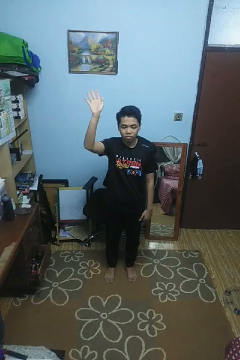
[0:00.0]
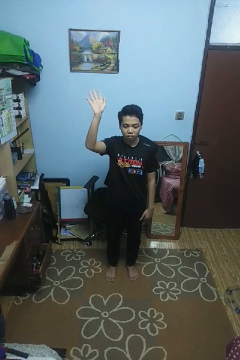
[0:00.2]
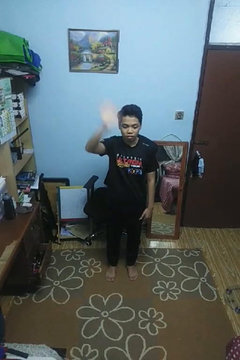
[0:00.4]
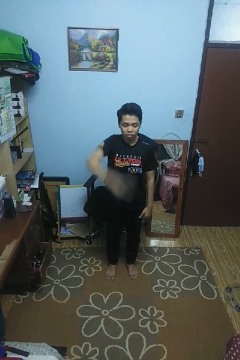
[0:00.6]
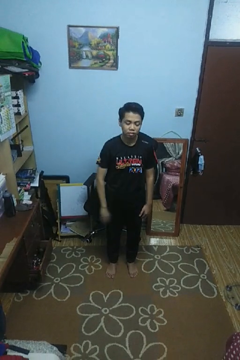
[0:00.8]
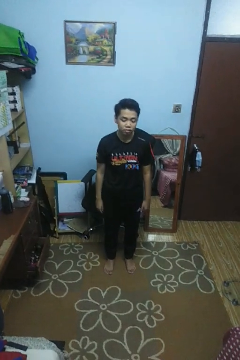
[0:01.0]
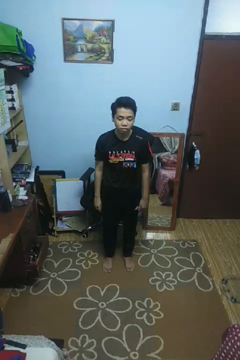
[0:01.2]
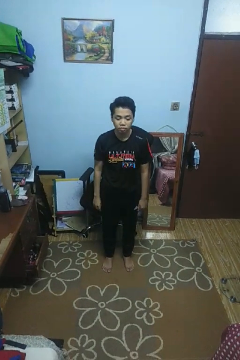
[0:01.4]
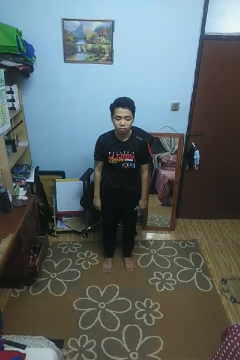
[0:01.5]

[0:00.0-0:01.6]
person gestures swipe down

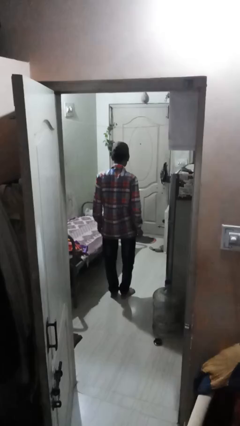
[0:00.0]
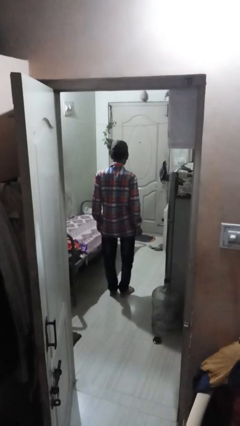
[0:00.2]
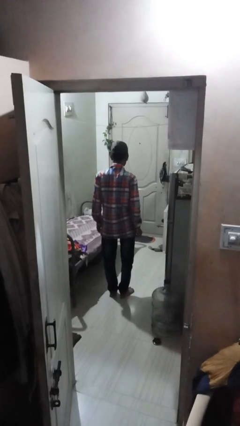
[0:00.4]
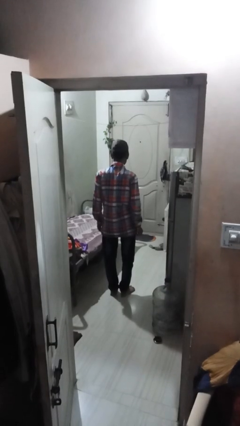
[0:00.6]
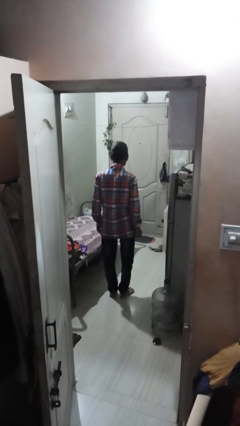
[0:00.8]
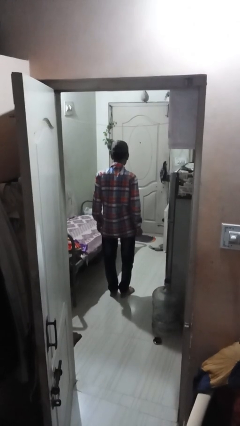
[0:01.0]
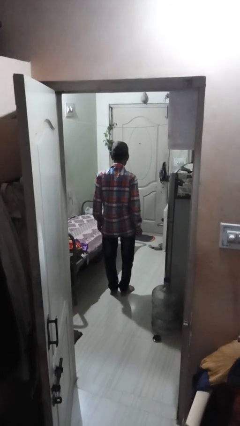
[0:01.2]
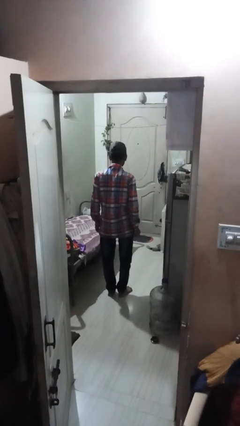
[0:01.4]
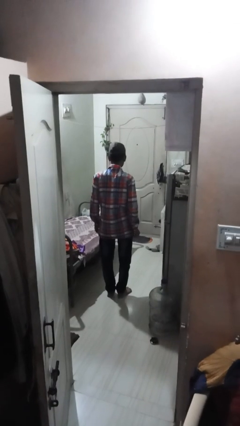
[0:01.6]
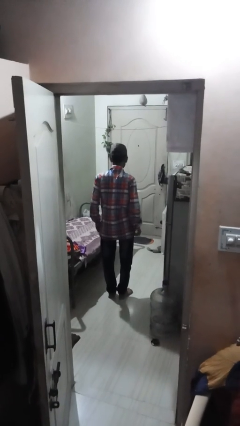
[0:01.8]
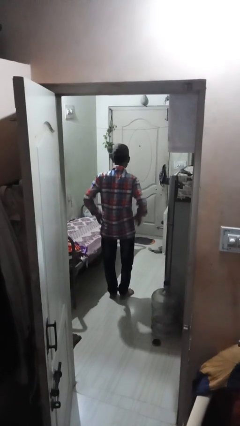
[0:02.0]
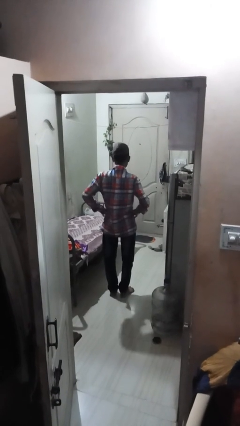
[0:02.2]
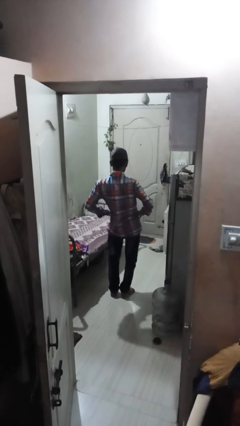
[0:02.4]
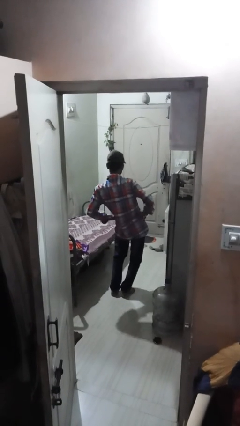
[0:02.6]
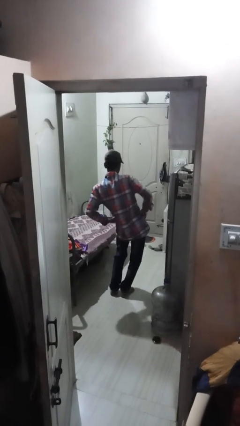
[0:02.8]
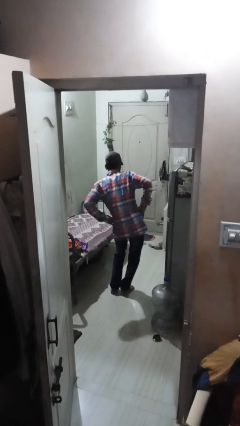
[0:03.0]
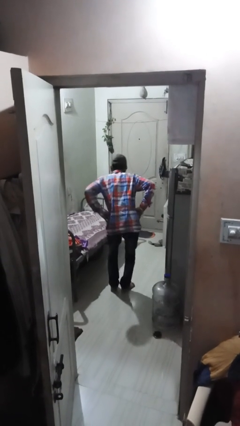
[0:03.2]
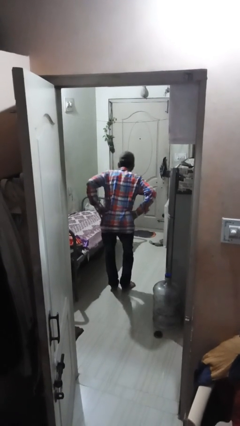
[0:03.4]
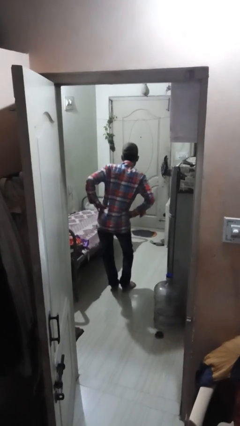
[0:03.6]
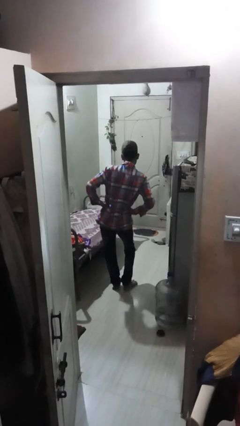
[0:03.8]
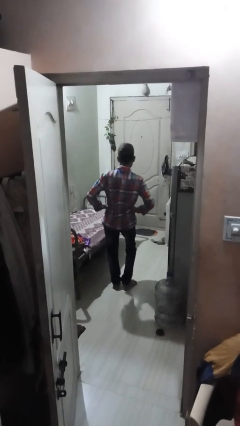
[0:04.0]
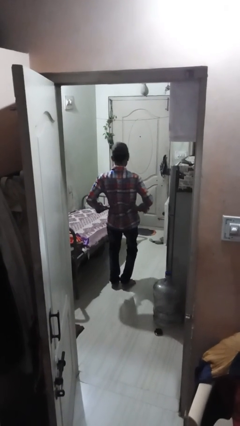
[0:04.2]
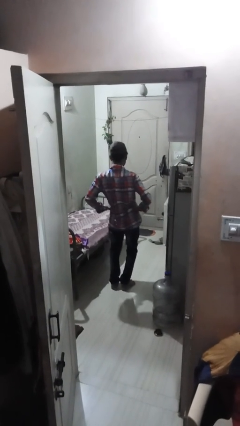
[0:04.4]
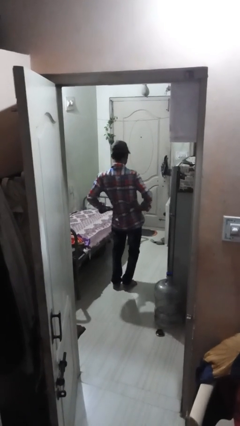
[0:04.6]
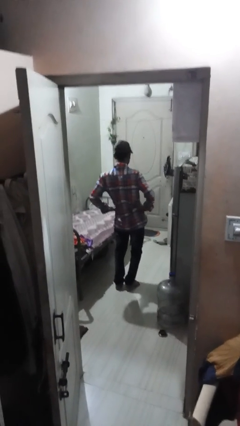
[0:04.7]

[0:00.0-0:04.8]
person wiggles hips

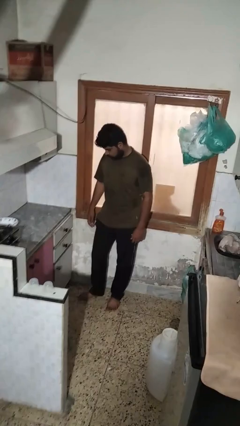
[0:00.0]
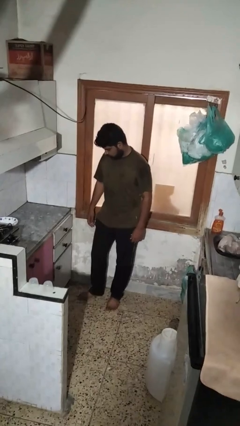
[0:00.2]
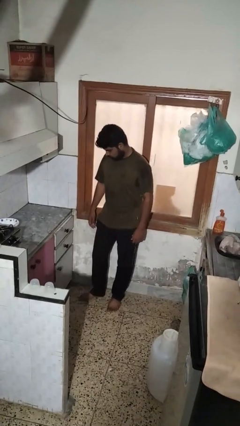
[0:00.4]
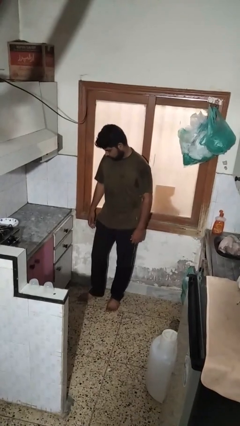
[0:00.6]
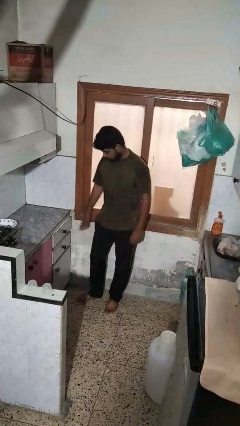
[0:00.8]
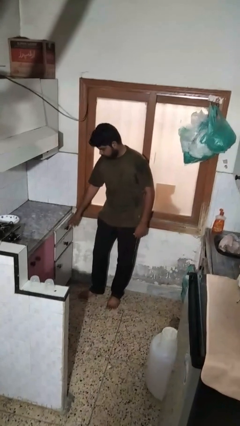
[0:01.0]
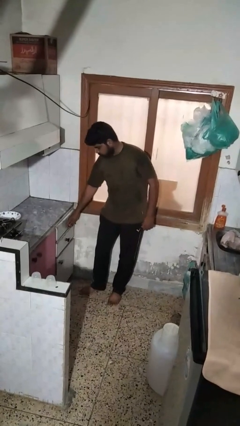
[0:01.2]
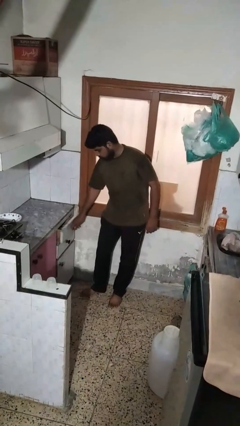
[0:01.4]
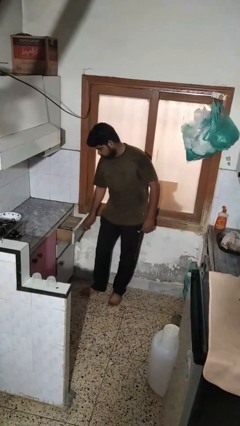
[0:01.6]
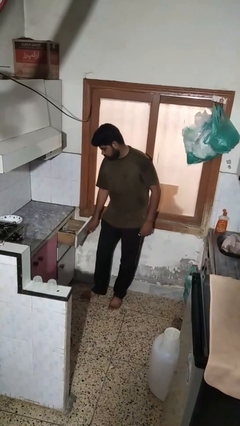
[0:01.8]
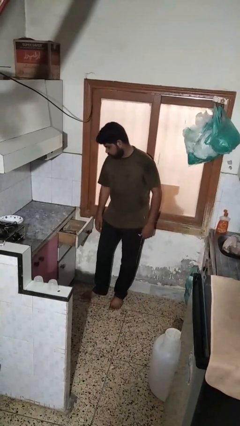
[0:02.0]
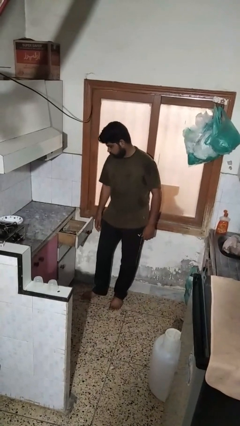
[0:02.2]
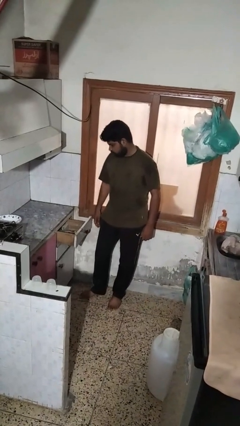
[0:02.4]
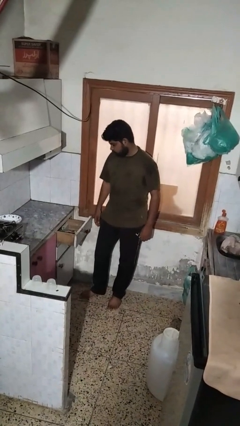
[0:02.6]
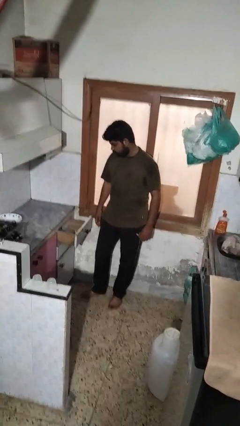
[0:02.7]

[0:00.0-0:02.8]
person opens kitchen drawer

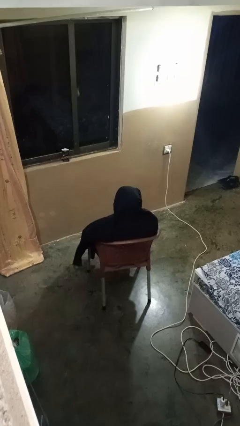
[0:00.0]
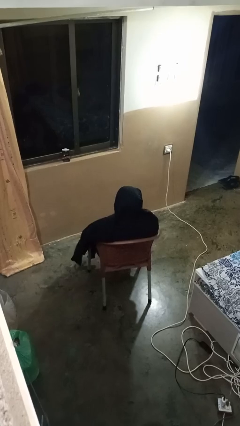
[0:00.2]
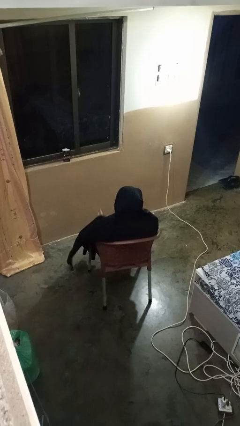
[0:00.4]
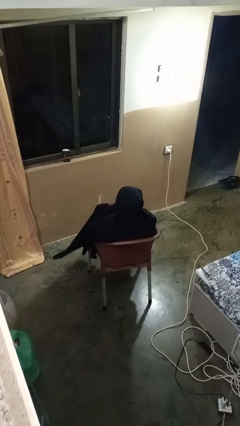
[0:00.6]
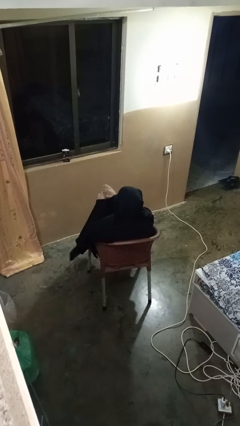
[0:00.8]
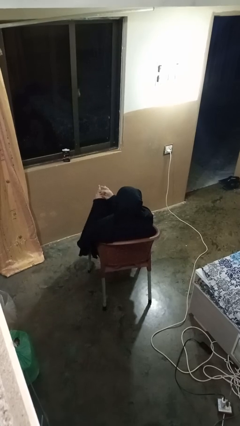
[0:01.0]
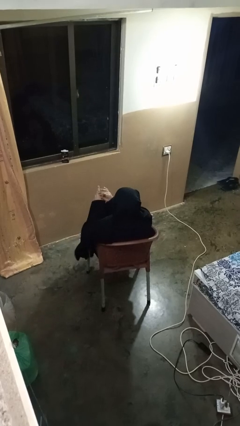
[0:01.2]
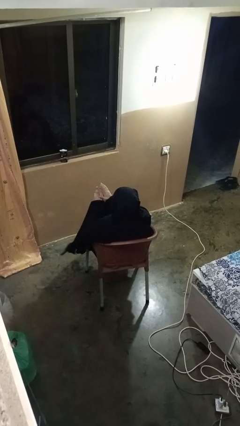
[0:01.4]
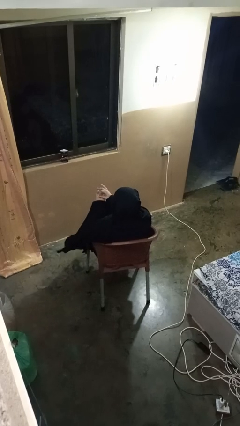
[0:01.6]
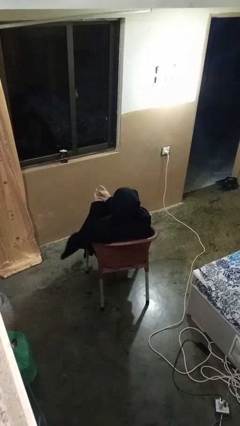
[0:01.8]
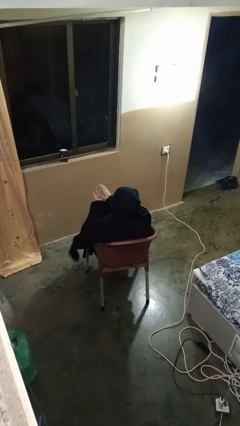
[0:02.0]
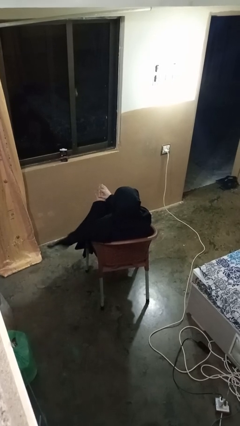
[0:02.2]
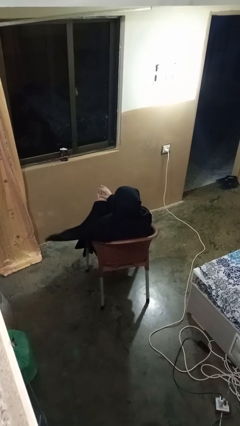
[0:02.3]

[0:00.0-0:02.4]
person cracks knuckles

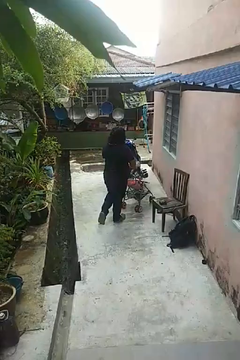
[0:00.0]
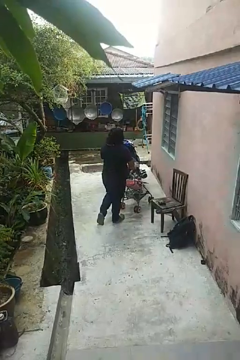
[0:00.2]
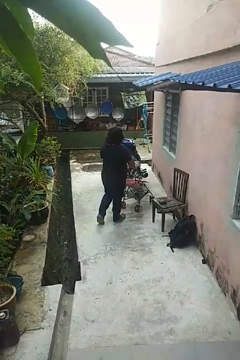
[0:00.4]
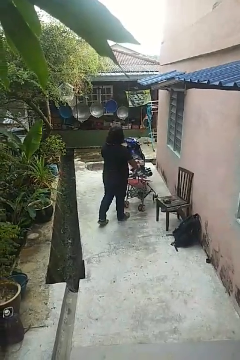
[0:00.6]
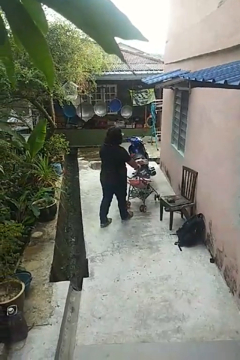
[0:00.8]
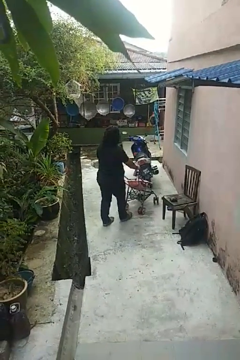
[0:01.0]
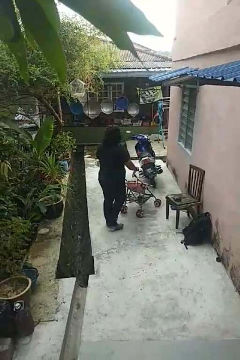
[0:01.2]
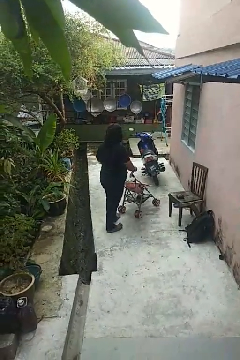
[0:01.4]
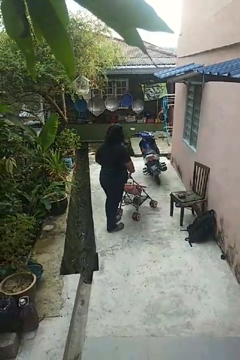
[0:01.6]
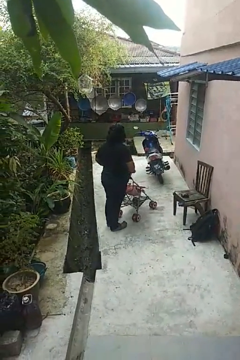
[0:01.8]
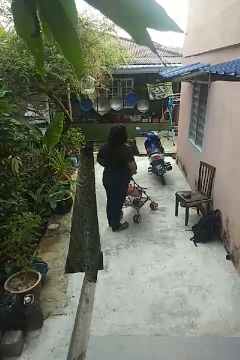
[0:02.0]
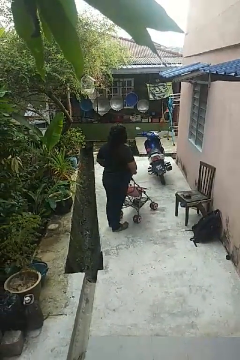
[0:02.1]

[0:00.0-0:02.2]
person pulls wheeled cart

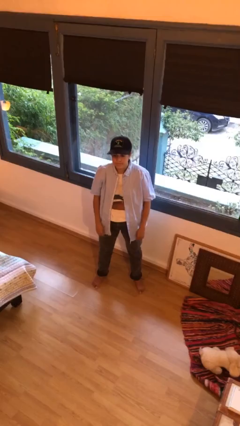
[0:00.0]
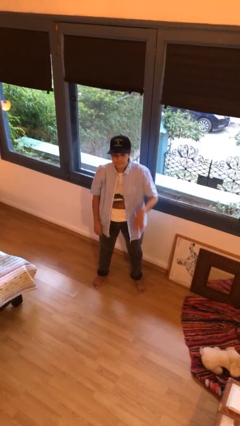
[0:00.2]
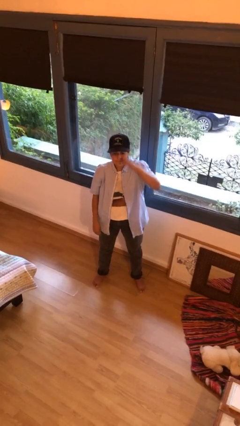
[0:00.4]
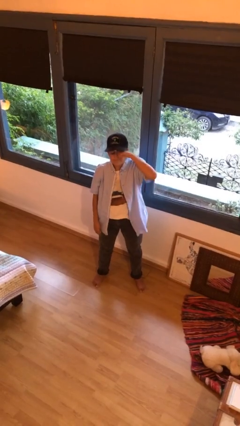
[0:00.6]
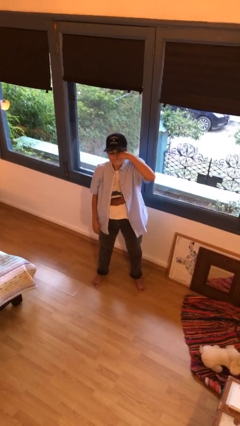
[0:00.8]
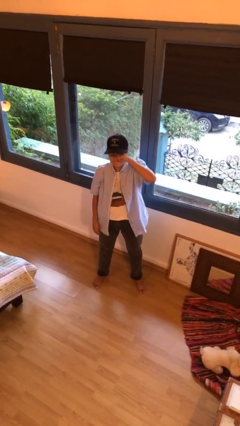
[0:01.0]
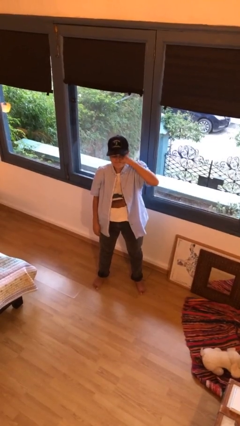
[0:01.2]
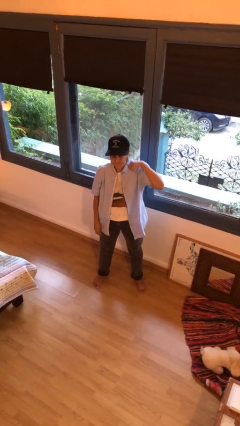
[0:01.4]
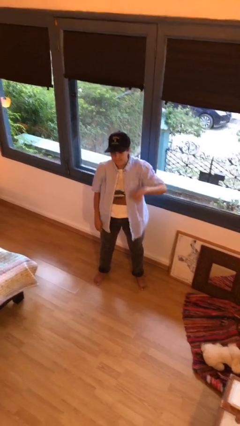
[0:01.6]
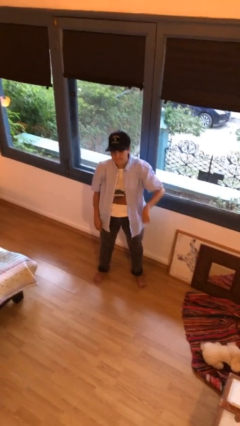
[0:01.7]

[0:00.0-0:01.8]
person rubs eyes

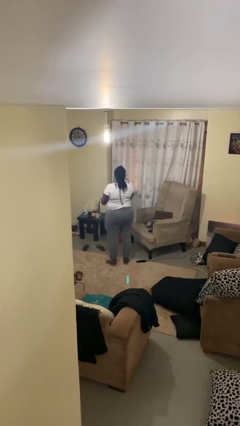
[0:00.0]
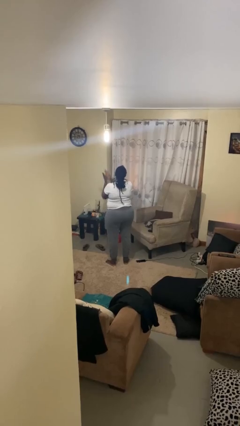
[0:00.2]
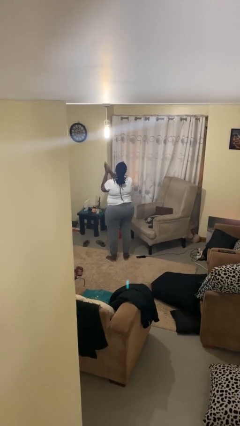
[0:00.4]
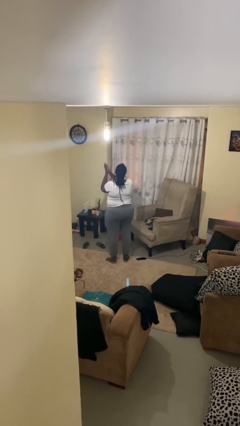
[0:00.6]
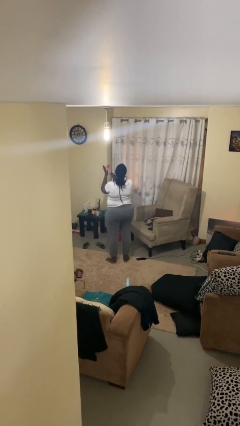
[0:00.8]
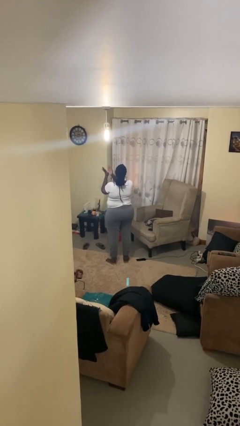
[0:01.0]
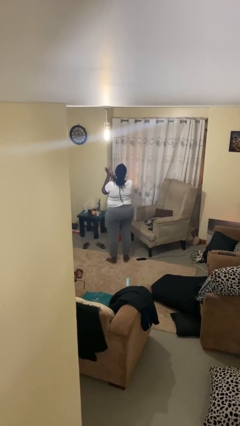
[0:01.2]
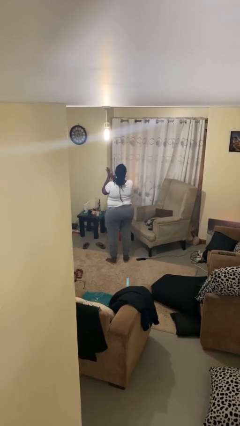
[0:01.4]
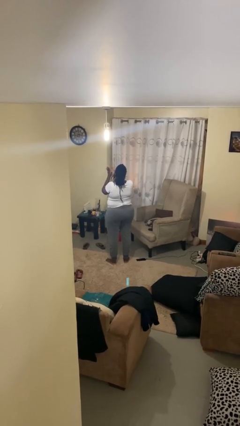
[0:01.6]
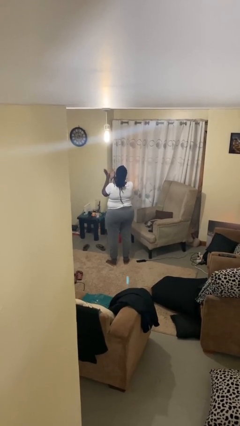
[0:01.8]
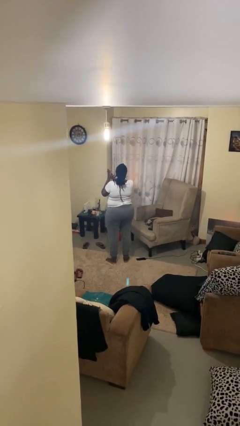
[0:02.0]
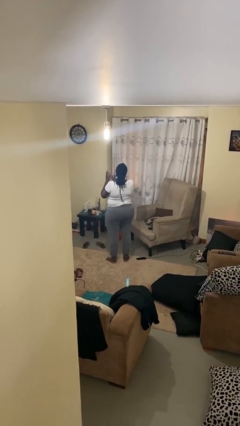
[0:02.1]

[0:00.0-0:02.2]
person claps hands
